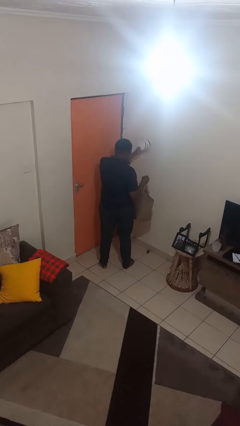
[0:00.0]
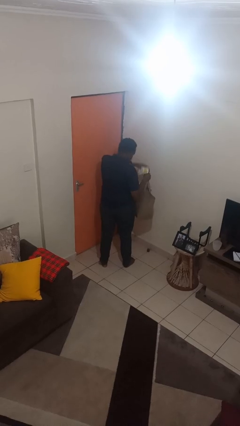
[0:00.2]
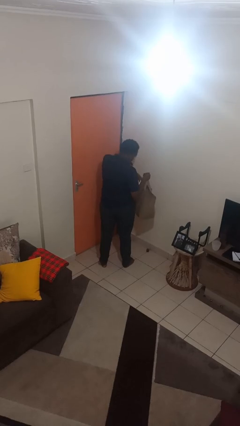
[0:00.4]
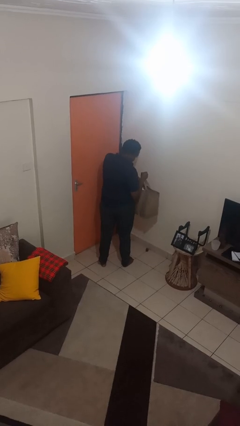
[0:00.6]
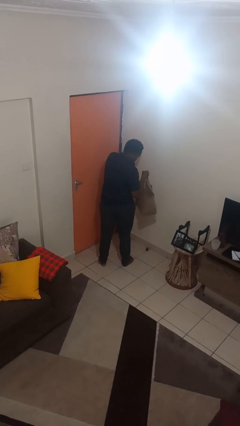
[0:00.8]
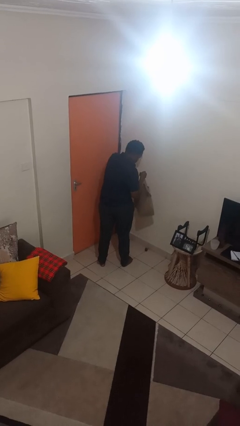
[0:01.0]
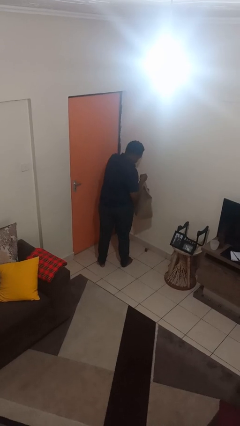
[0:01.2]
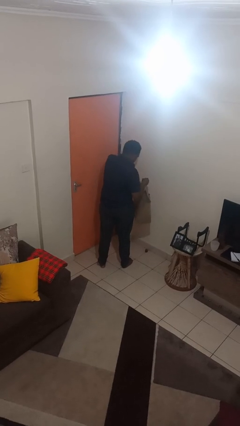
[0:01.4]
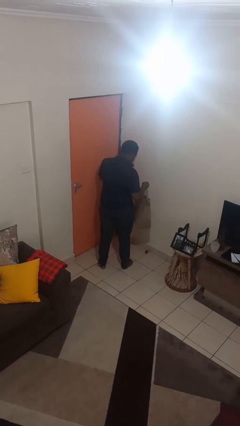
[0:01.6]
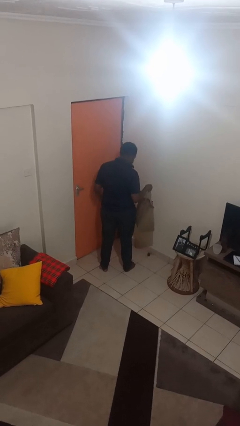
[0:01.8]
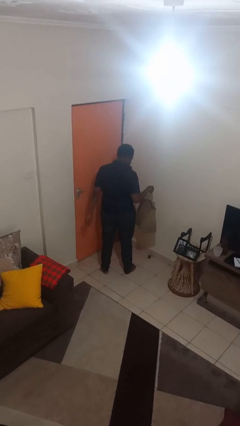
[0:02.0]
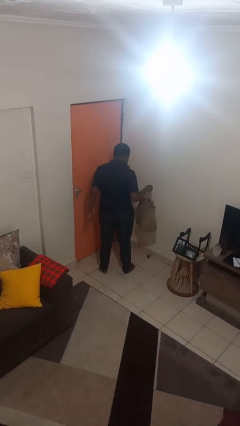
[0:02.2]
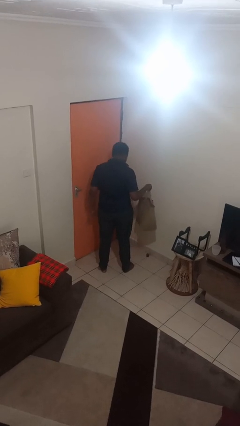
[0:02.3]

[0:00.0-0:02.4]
person puts object into bag

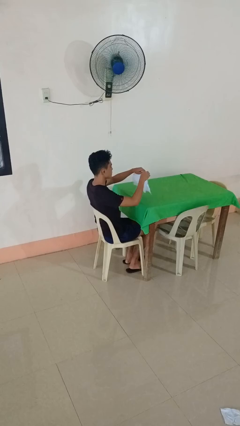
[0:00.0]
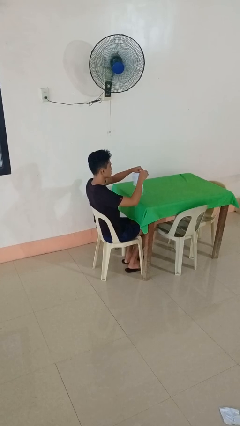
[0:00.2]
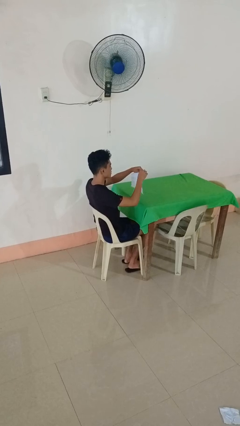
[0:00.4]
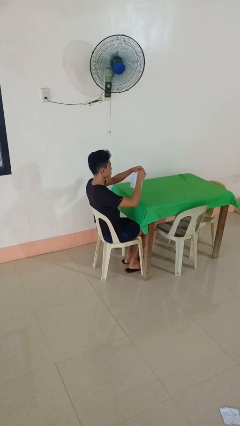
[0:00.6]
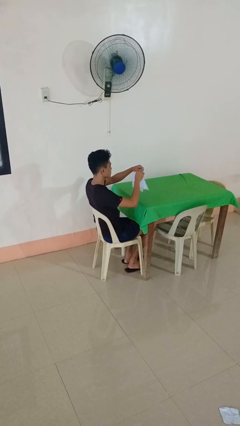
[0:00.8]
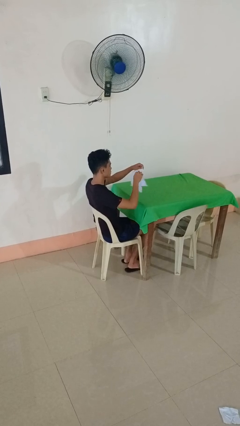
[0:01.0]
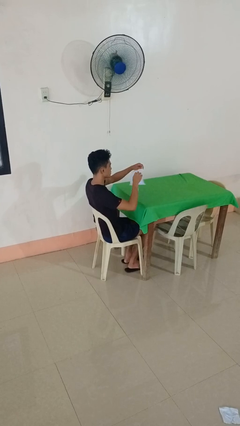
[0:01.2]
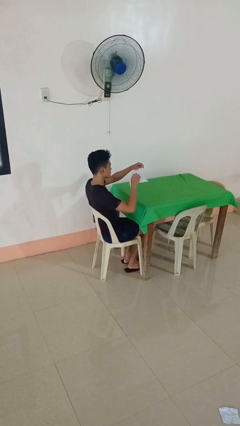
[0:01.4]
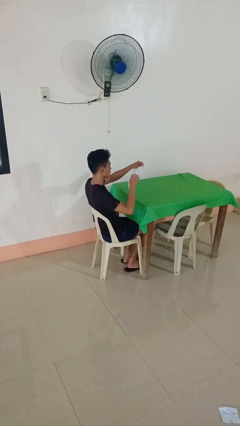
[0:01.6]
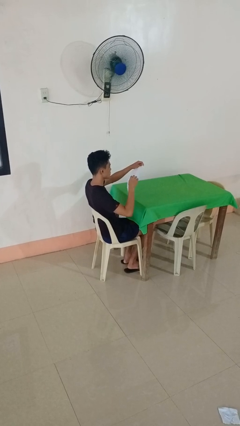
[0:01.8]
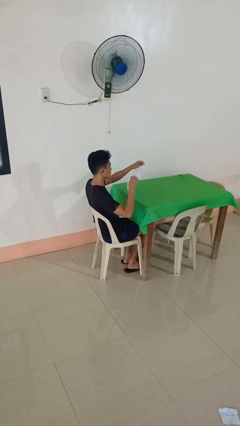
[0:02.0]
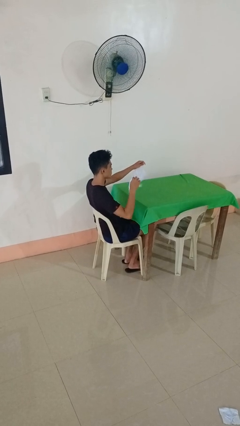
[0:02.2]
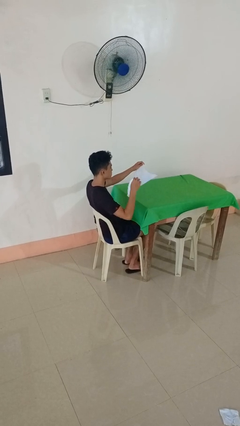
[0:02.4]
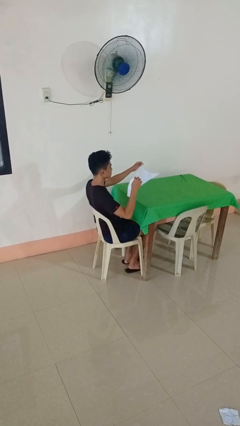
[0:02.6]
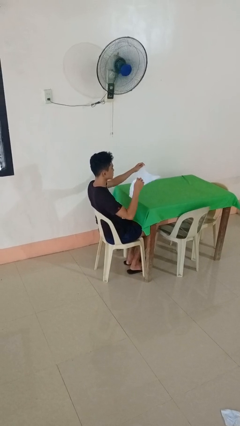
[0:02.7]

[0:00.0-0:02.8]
person tears paper

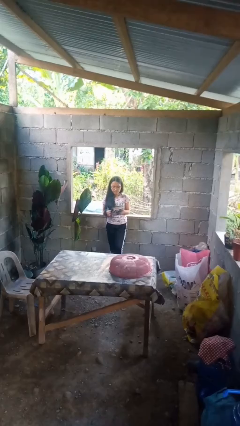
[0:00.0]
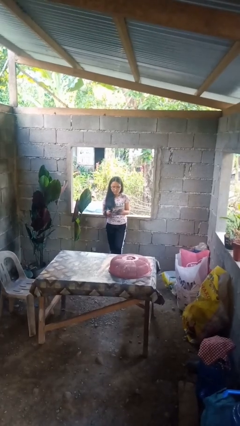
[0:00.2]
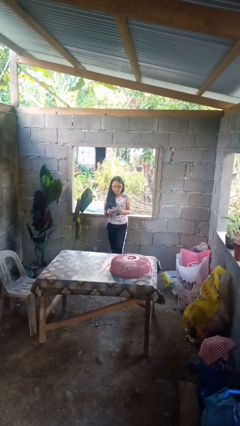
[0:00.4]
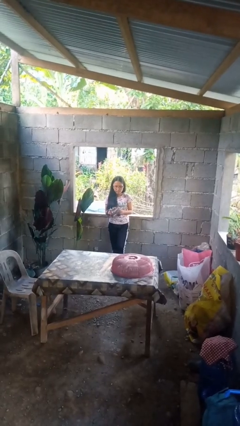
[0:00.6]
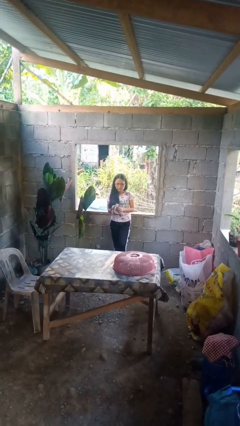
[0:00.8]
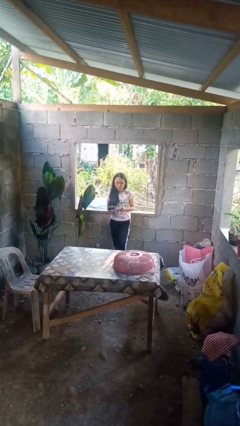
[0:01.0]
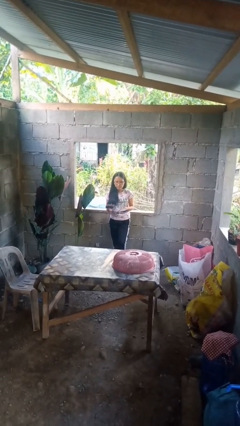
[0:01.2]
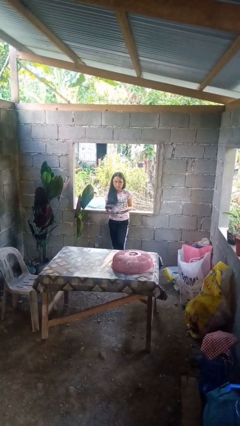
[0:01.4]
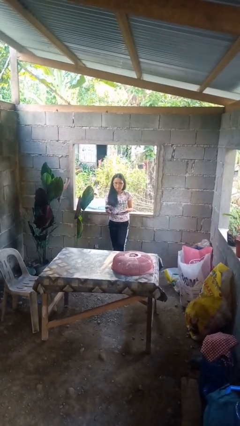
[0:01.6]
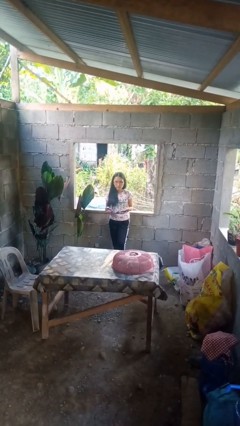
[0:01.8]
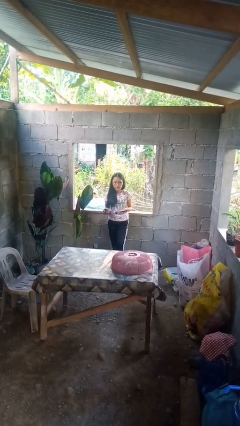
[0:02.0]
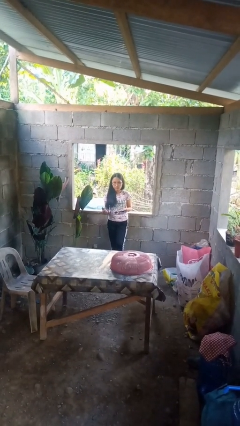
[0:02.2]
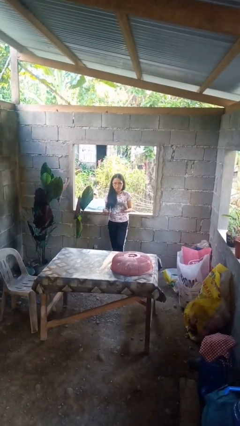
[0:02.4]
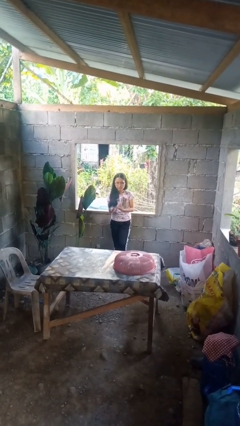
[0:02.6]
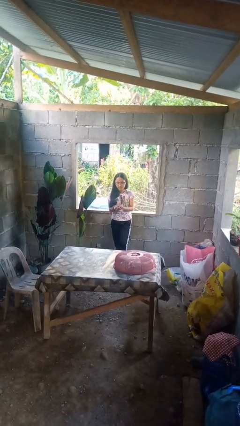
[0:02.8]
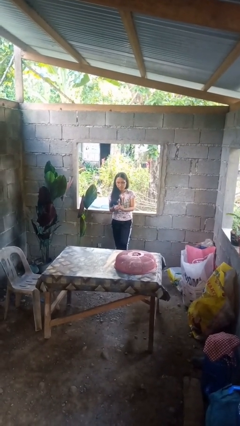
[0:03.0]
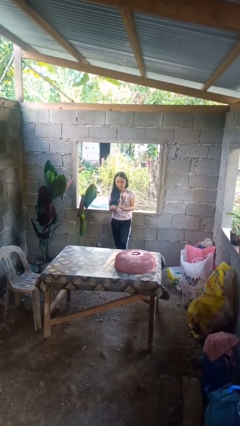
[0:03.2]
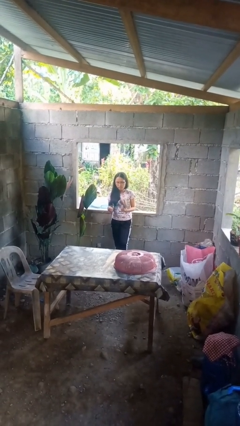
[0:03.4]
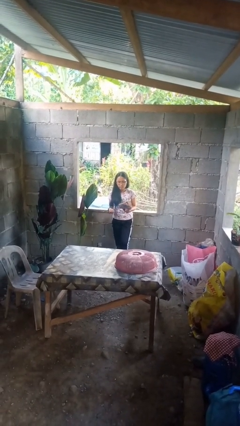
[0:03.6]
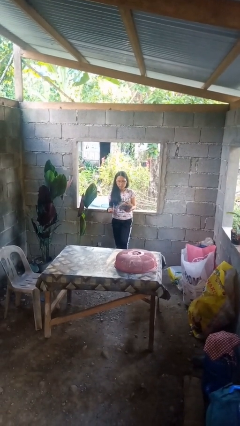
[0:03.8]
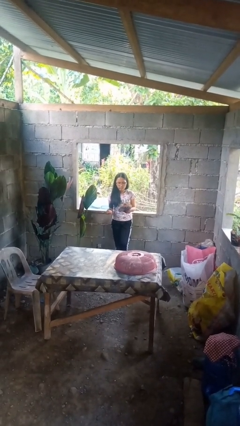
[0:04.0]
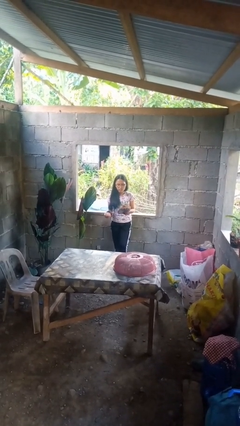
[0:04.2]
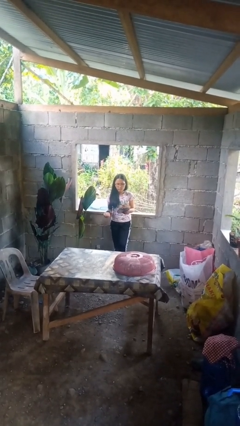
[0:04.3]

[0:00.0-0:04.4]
person crumples paper

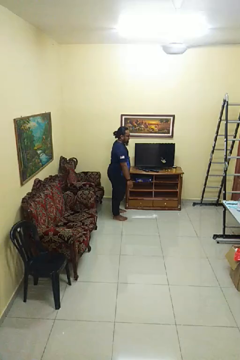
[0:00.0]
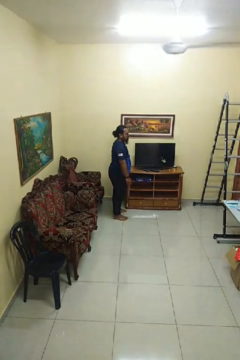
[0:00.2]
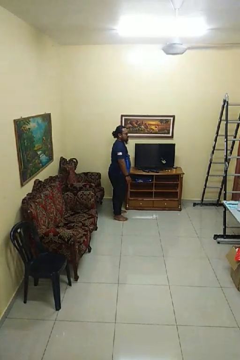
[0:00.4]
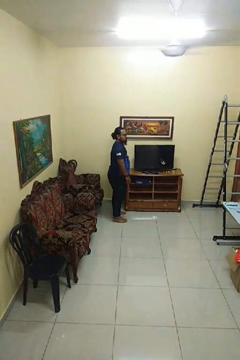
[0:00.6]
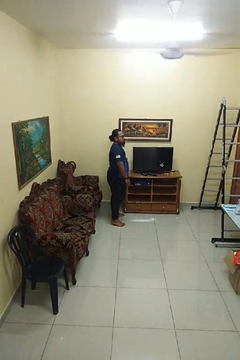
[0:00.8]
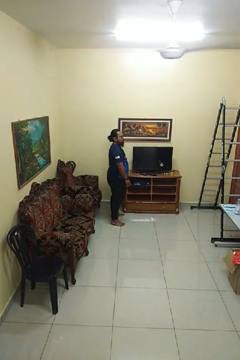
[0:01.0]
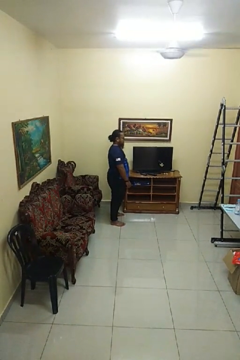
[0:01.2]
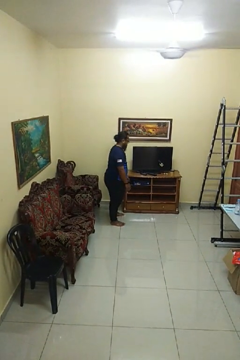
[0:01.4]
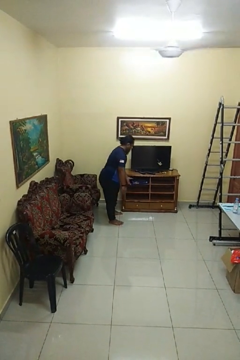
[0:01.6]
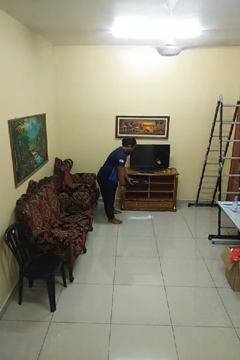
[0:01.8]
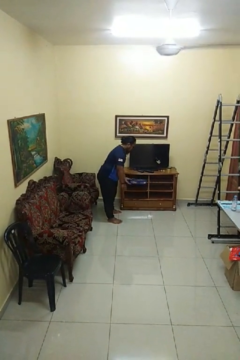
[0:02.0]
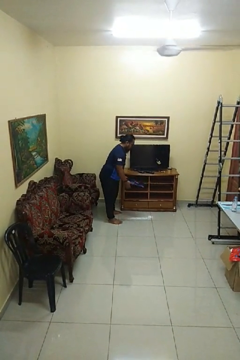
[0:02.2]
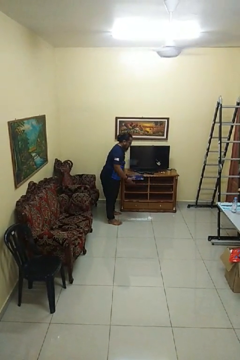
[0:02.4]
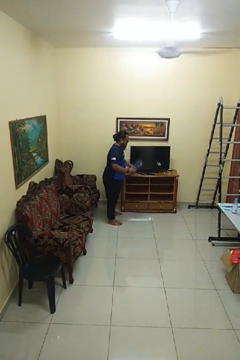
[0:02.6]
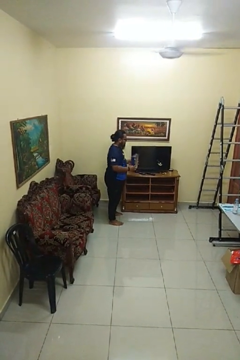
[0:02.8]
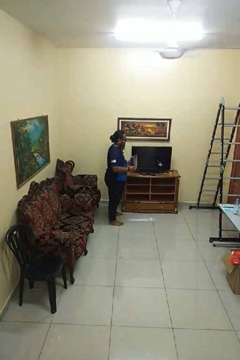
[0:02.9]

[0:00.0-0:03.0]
person picks up object from cabinet

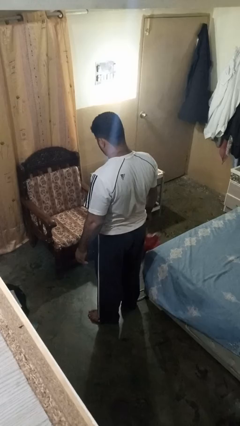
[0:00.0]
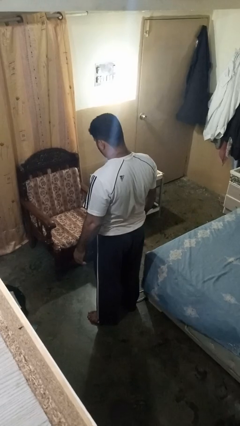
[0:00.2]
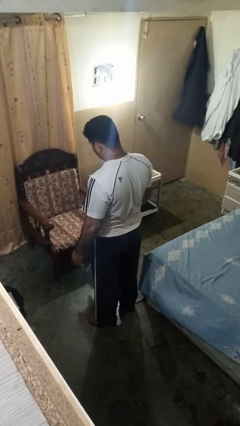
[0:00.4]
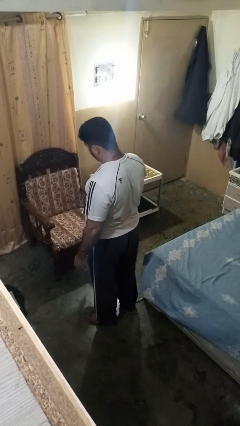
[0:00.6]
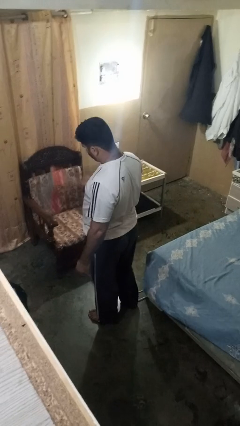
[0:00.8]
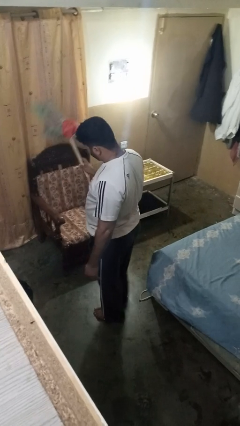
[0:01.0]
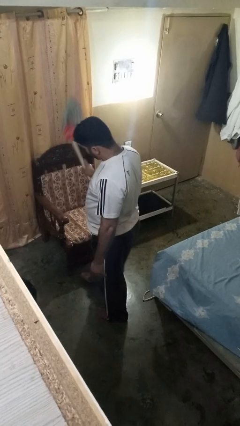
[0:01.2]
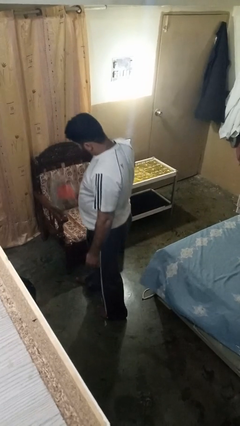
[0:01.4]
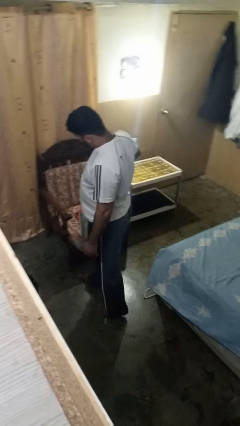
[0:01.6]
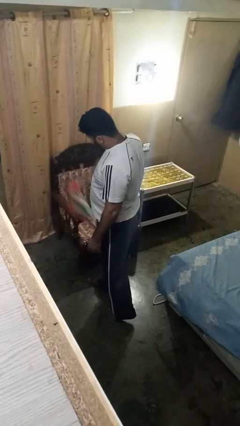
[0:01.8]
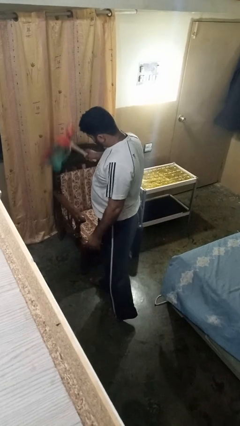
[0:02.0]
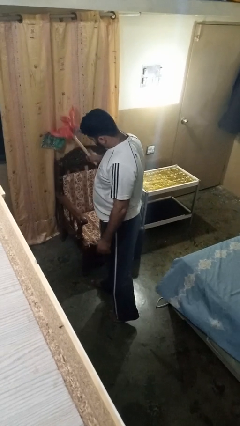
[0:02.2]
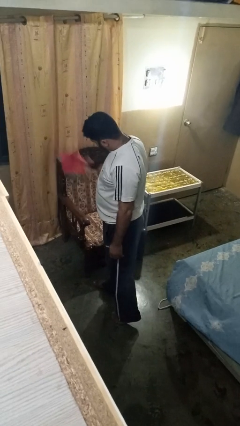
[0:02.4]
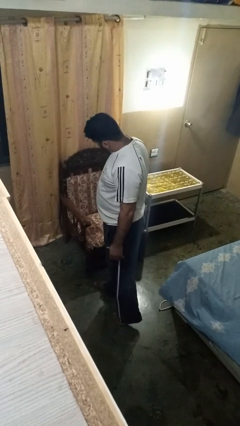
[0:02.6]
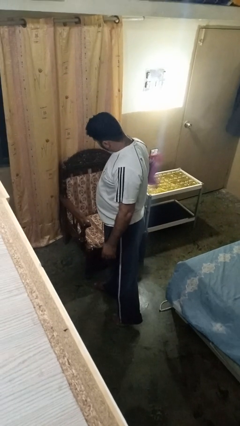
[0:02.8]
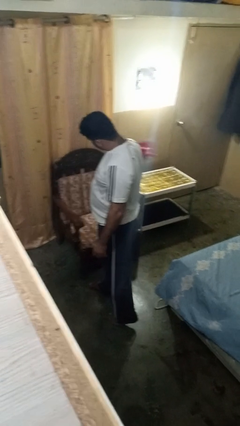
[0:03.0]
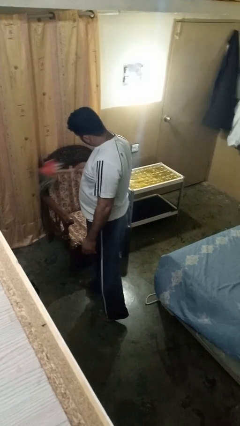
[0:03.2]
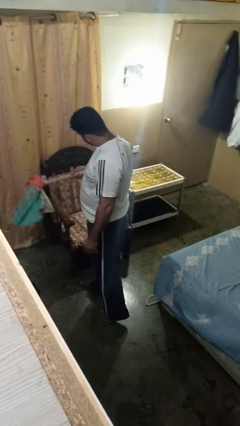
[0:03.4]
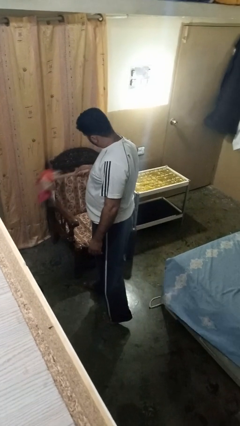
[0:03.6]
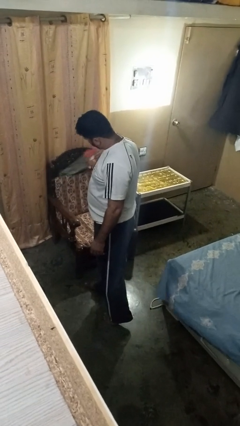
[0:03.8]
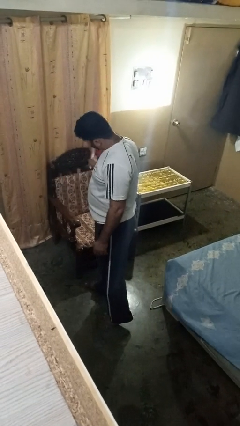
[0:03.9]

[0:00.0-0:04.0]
person dusts furniture

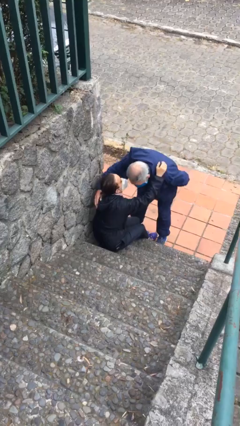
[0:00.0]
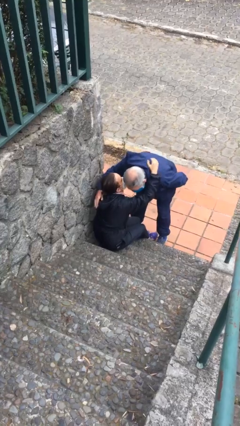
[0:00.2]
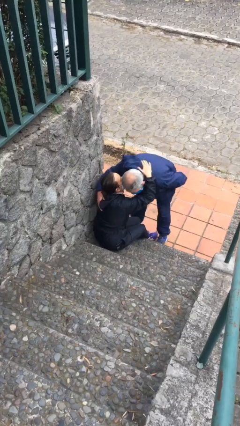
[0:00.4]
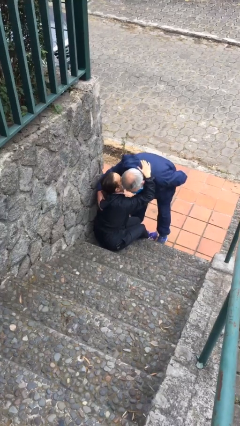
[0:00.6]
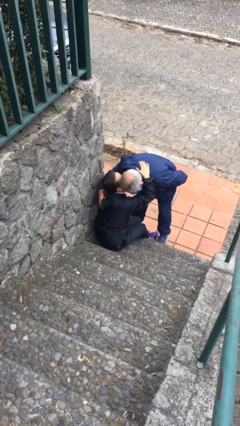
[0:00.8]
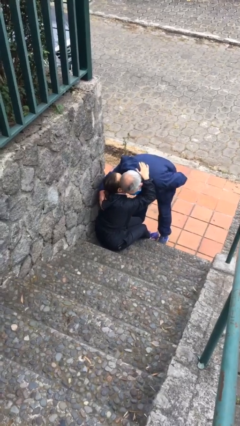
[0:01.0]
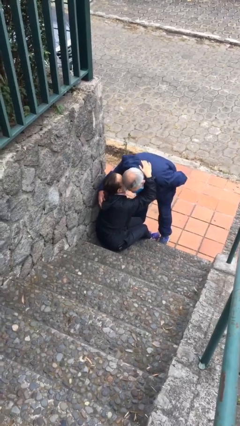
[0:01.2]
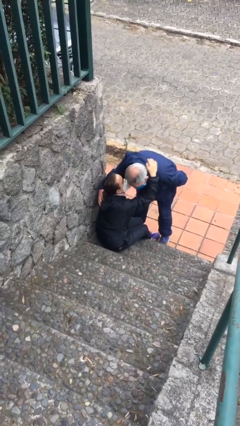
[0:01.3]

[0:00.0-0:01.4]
person embraces person

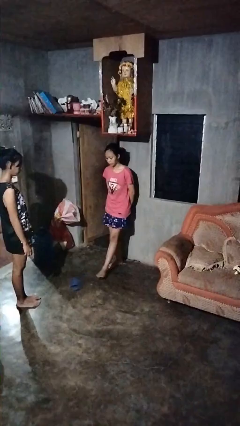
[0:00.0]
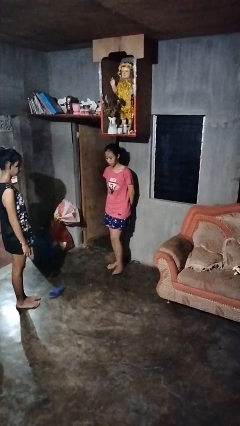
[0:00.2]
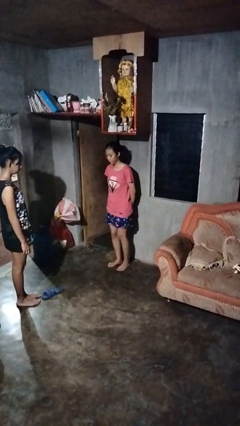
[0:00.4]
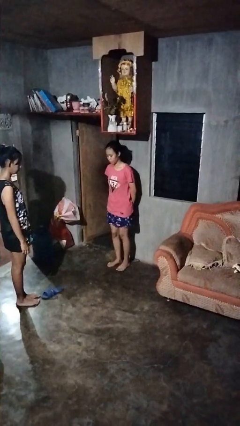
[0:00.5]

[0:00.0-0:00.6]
person kicks object to person
